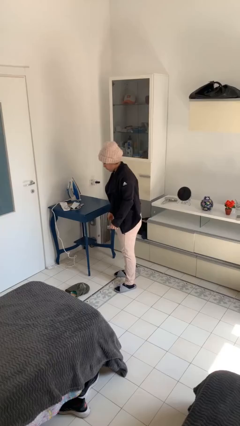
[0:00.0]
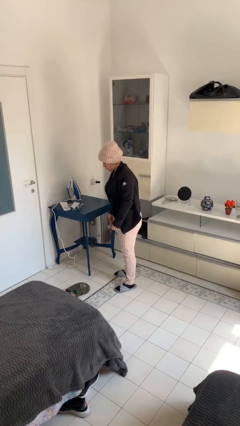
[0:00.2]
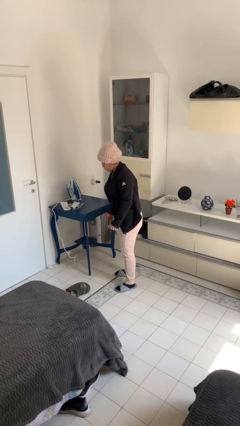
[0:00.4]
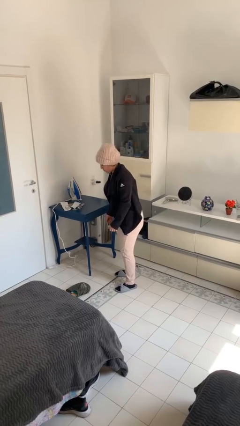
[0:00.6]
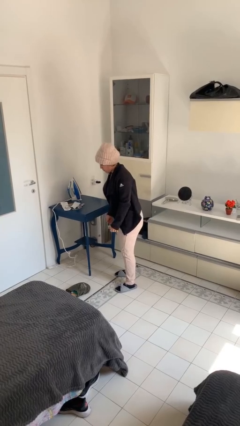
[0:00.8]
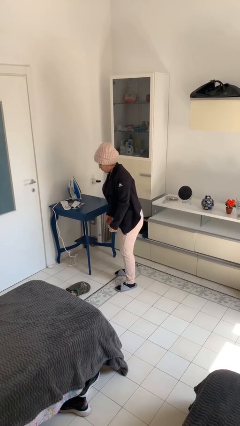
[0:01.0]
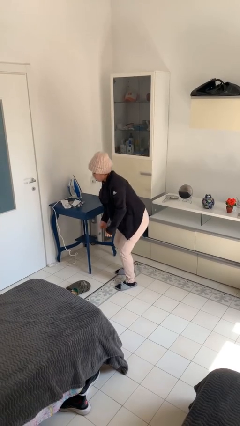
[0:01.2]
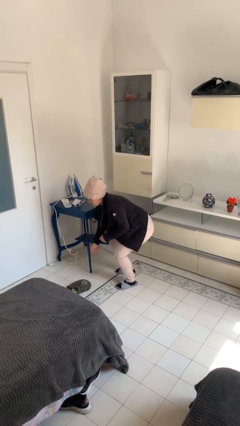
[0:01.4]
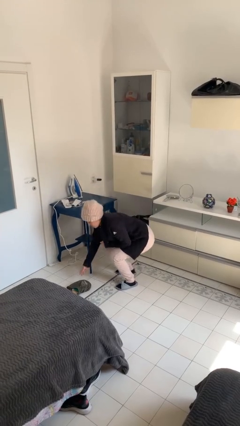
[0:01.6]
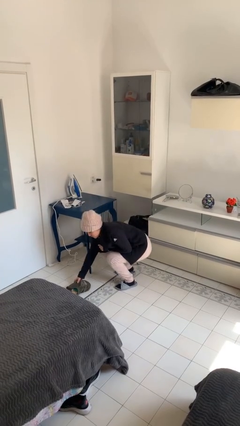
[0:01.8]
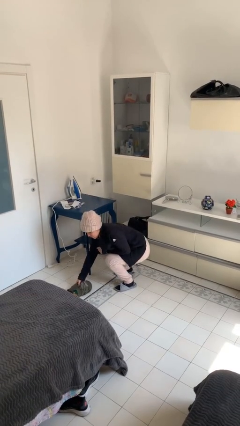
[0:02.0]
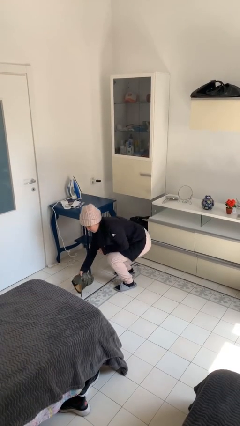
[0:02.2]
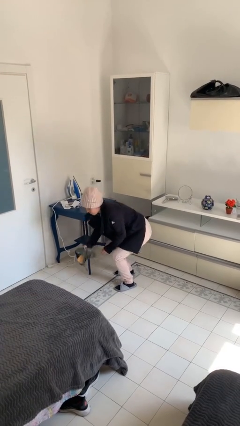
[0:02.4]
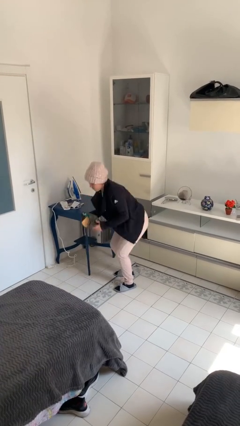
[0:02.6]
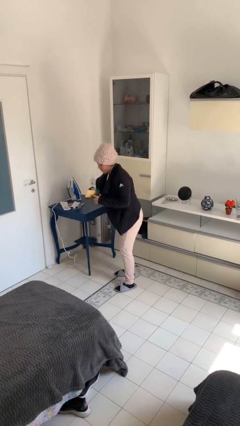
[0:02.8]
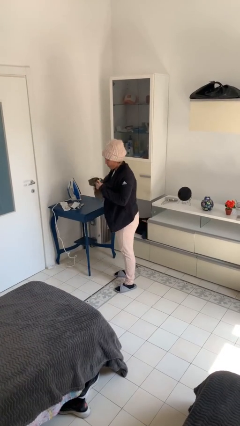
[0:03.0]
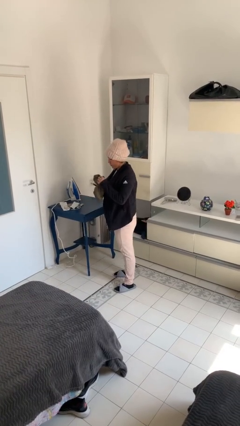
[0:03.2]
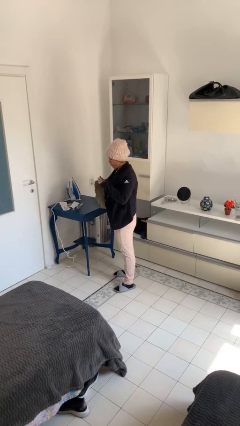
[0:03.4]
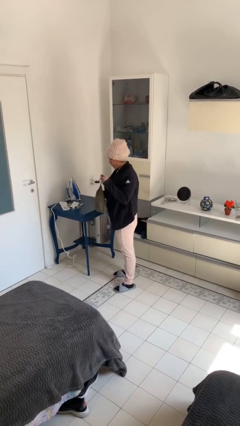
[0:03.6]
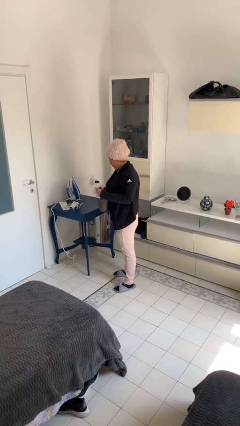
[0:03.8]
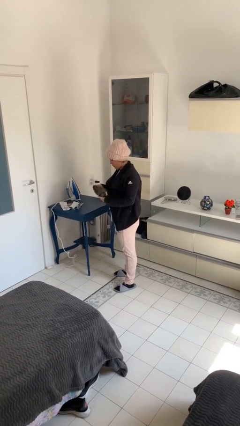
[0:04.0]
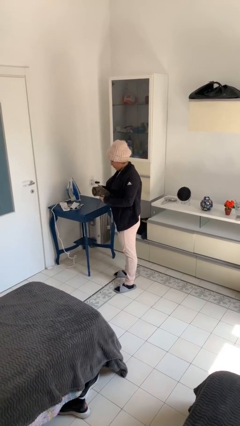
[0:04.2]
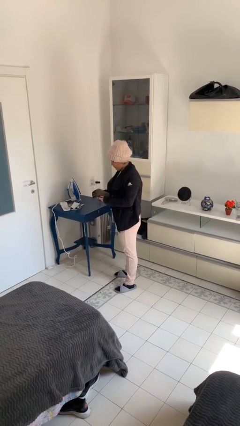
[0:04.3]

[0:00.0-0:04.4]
person picks up object from floor

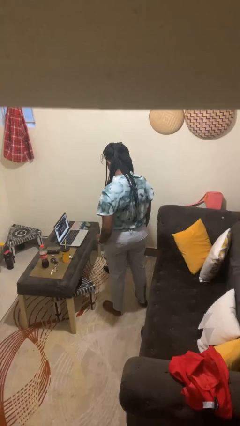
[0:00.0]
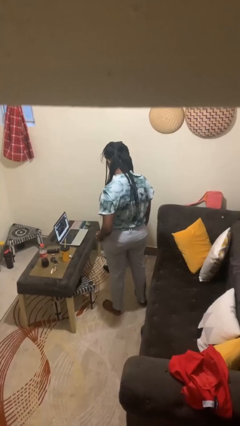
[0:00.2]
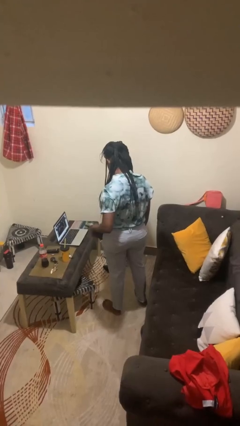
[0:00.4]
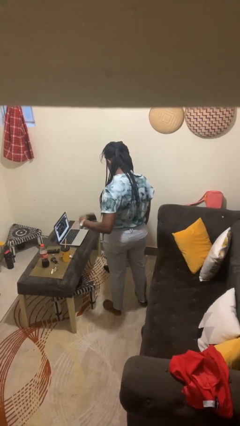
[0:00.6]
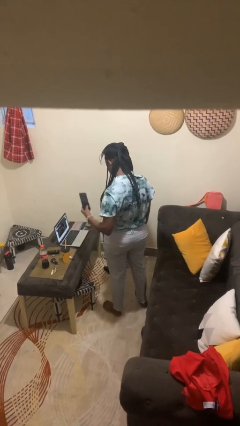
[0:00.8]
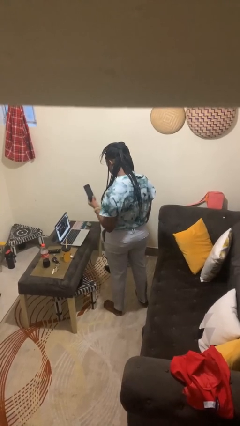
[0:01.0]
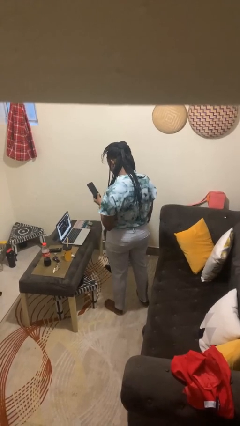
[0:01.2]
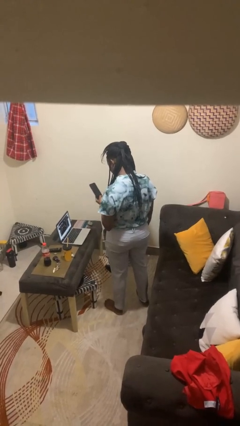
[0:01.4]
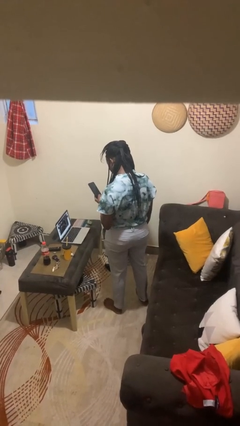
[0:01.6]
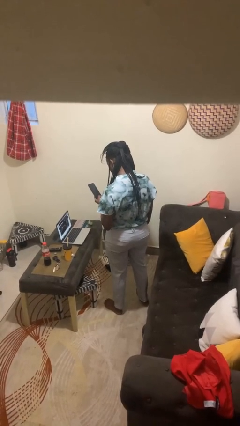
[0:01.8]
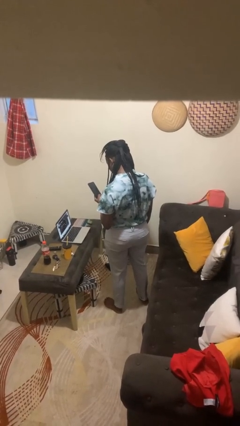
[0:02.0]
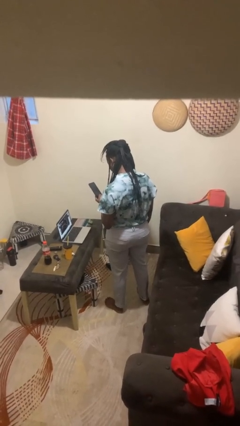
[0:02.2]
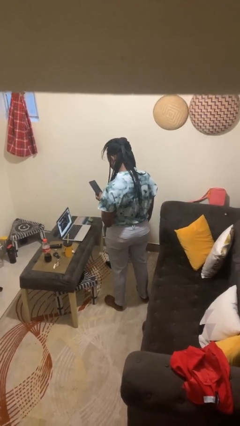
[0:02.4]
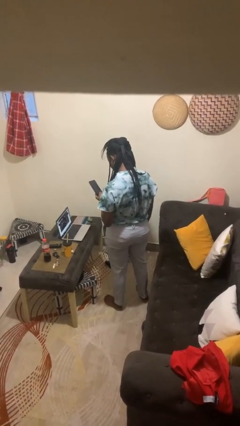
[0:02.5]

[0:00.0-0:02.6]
person takes phone from pocket

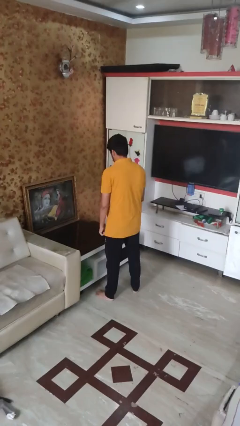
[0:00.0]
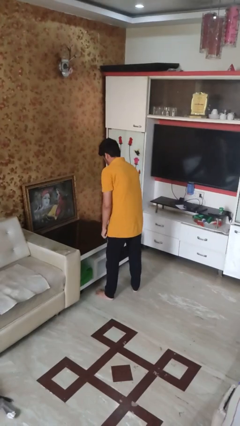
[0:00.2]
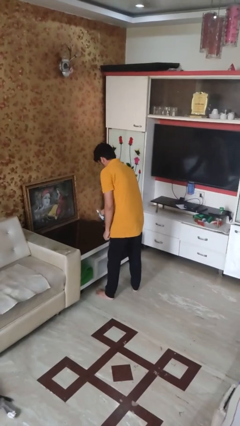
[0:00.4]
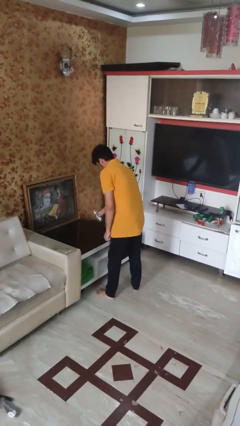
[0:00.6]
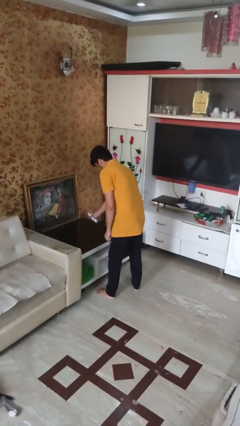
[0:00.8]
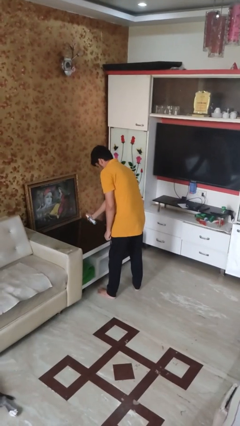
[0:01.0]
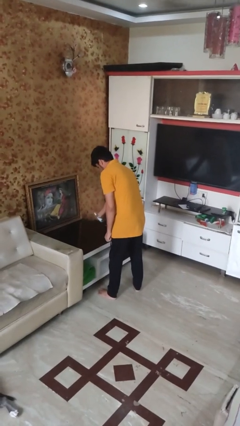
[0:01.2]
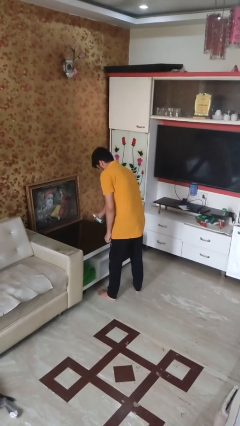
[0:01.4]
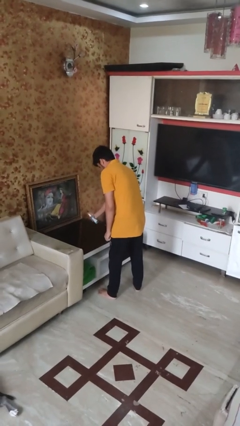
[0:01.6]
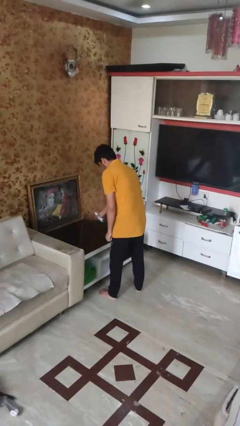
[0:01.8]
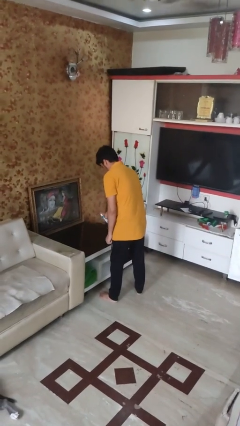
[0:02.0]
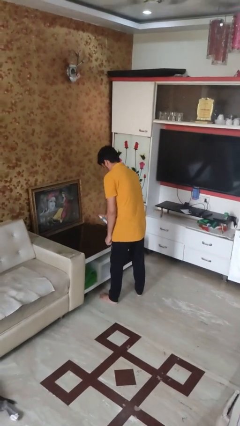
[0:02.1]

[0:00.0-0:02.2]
person sprays from bottle

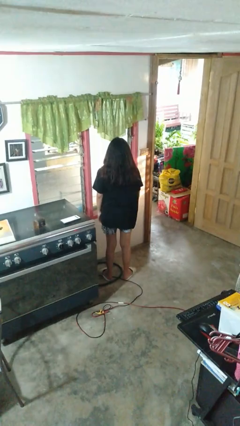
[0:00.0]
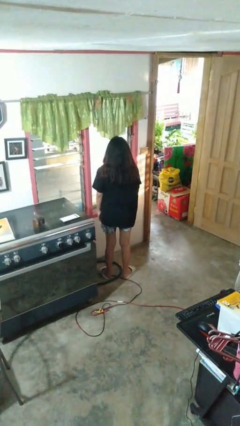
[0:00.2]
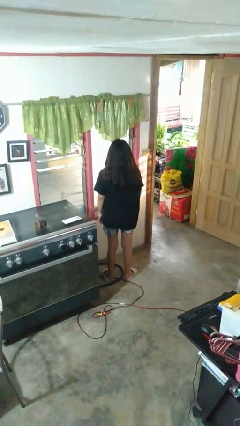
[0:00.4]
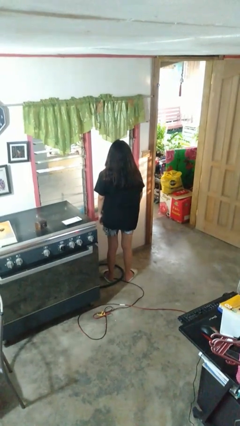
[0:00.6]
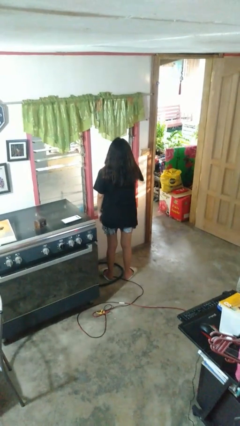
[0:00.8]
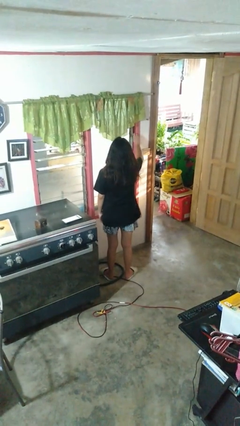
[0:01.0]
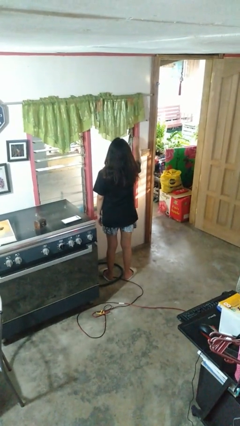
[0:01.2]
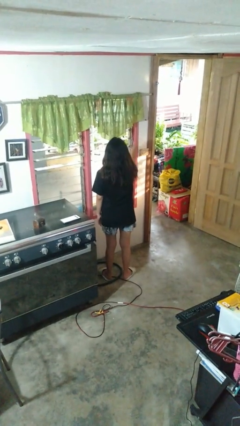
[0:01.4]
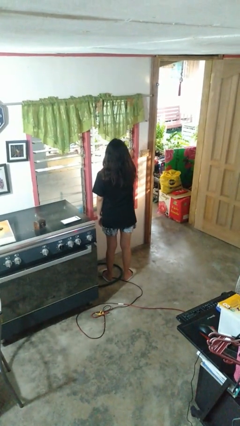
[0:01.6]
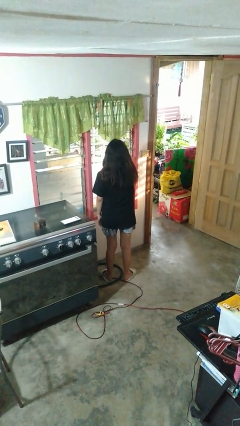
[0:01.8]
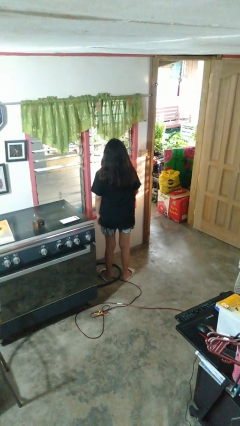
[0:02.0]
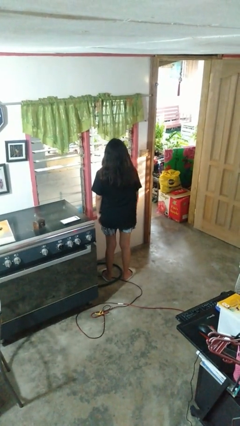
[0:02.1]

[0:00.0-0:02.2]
person opens home window

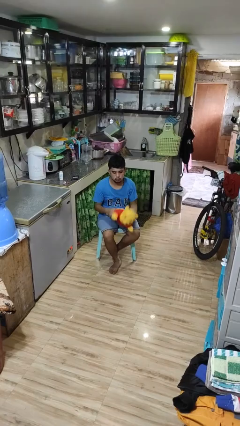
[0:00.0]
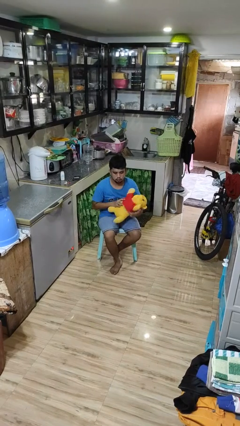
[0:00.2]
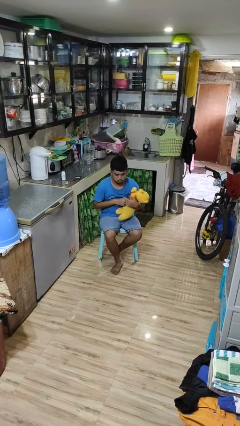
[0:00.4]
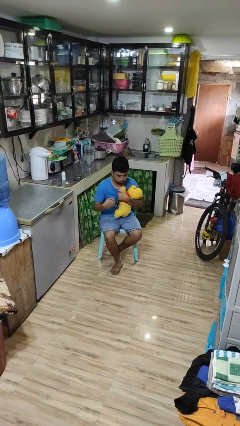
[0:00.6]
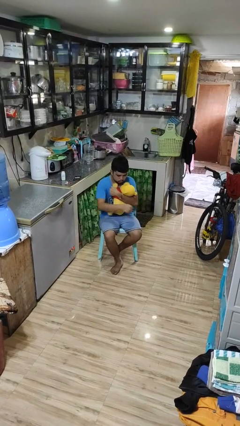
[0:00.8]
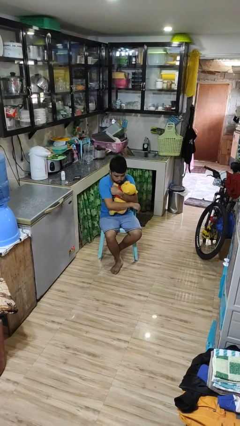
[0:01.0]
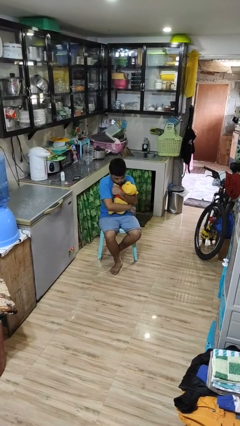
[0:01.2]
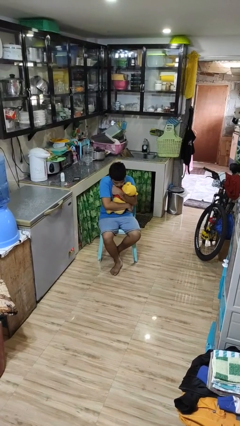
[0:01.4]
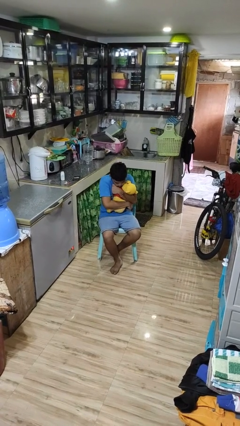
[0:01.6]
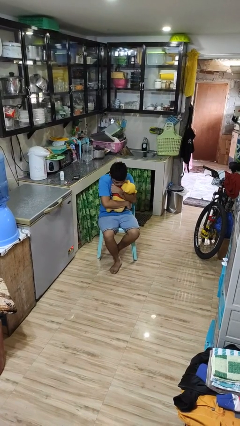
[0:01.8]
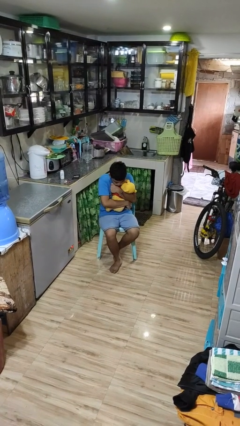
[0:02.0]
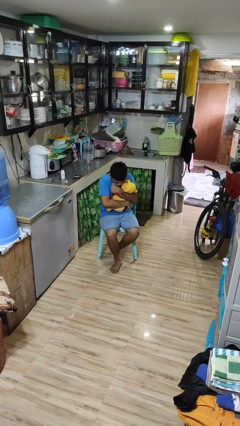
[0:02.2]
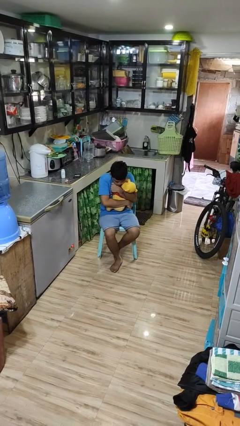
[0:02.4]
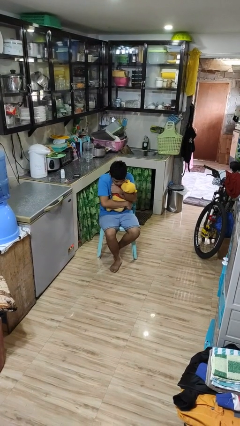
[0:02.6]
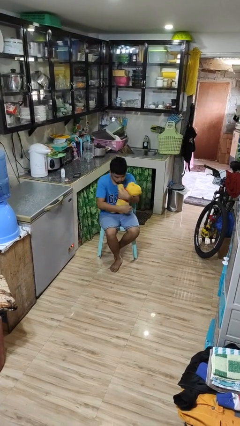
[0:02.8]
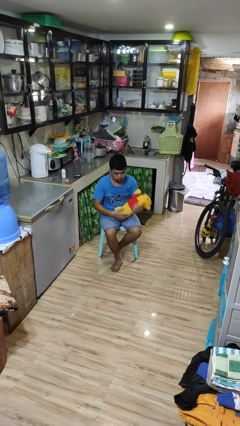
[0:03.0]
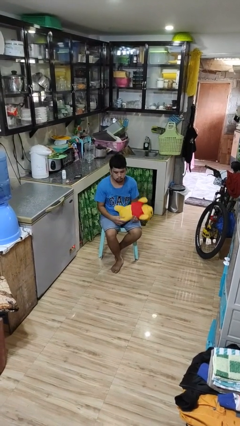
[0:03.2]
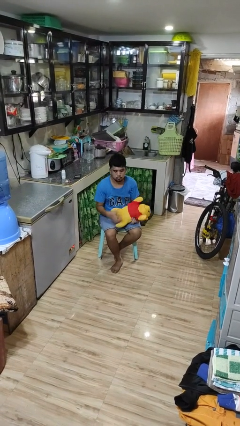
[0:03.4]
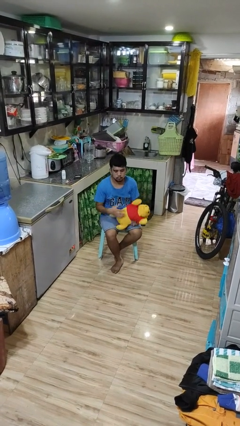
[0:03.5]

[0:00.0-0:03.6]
person hugs stuffed animal

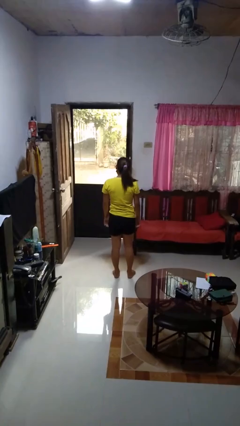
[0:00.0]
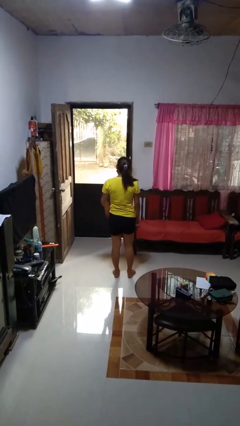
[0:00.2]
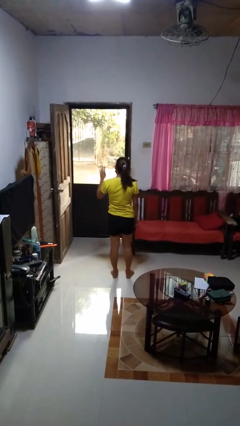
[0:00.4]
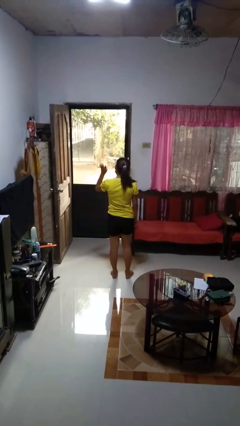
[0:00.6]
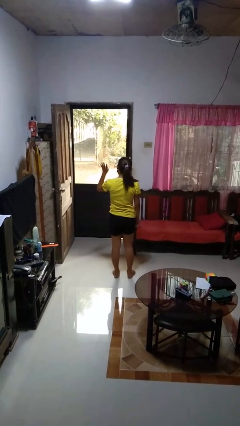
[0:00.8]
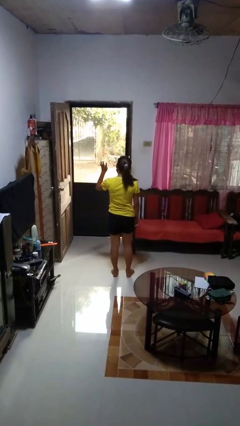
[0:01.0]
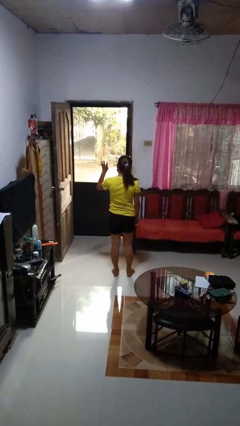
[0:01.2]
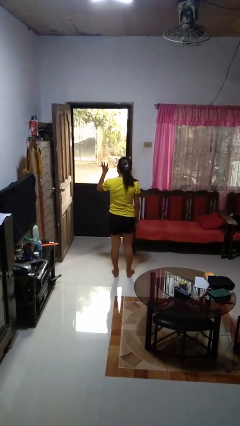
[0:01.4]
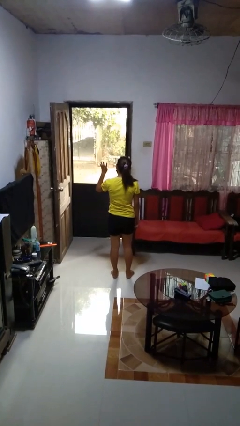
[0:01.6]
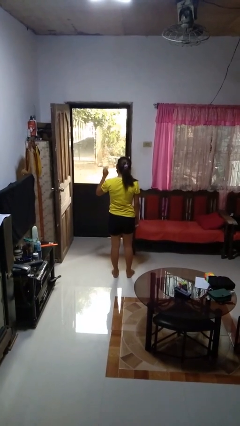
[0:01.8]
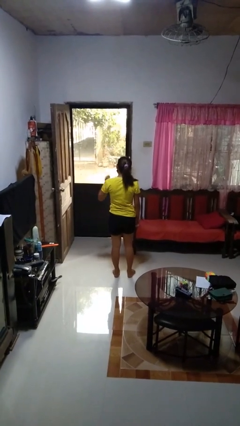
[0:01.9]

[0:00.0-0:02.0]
person gestures number four

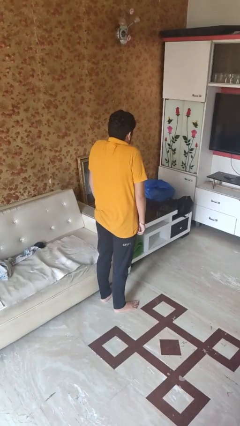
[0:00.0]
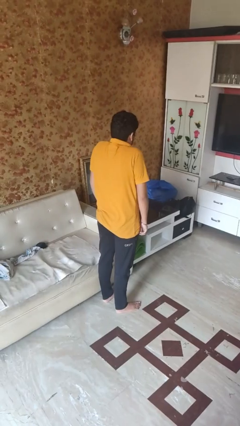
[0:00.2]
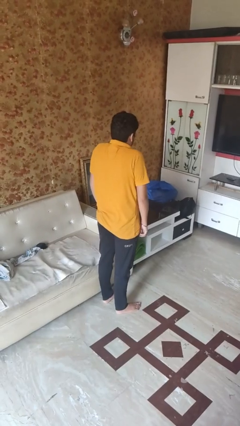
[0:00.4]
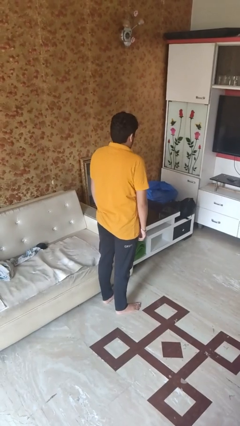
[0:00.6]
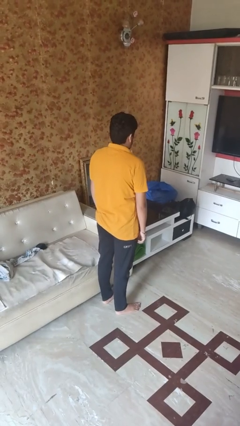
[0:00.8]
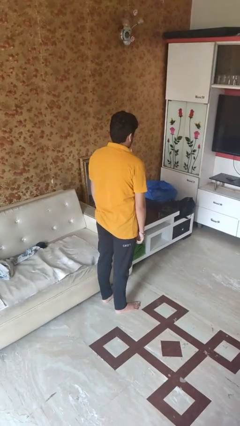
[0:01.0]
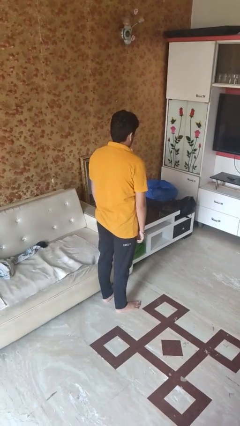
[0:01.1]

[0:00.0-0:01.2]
person shrugs
